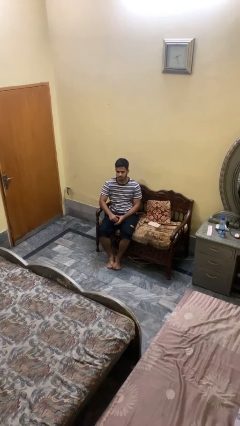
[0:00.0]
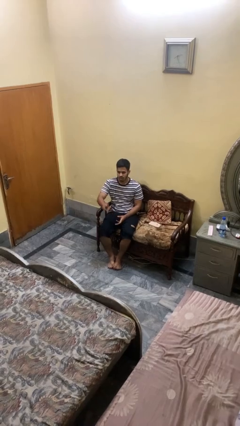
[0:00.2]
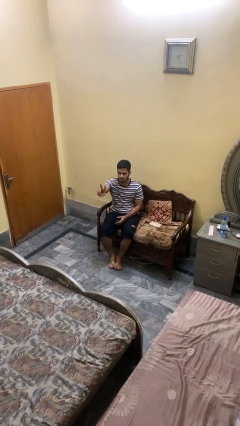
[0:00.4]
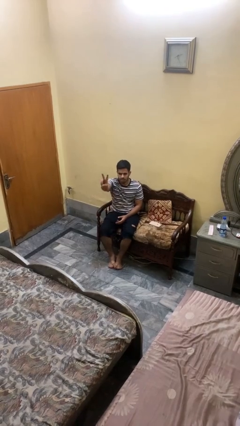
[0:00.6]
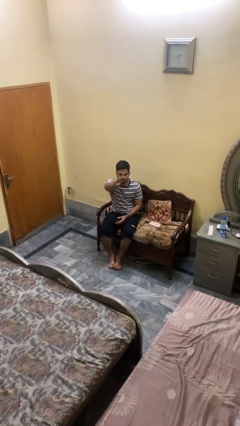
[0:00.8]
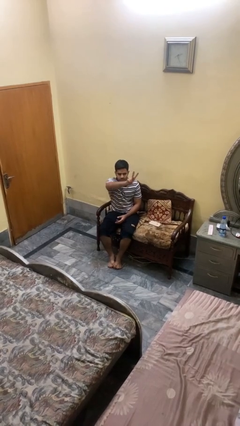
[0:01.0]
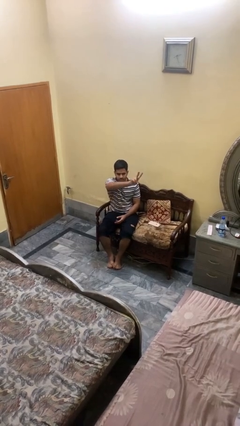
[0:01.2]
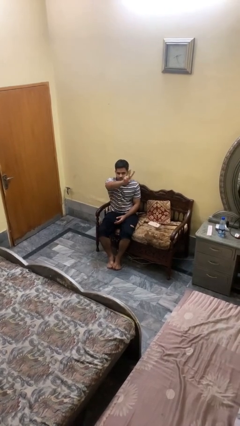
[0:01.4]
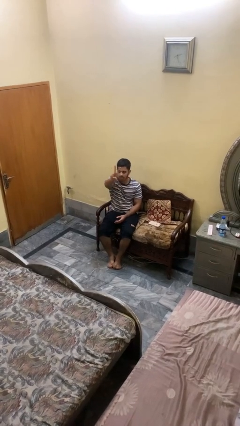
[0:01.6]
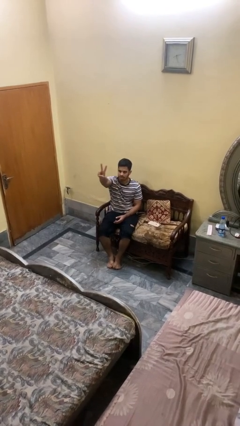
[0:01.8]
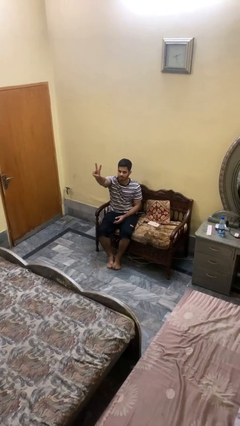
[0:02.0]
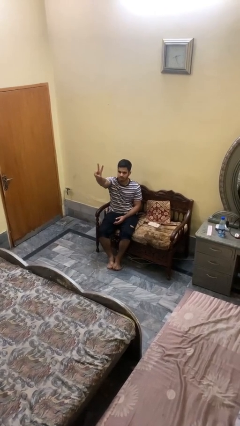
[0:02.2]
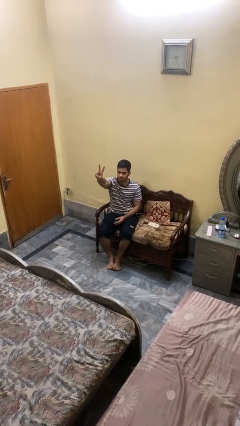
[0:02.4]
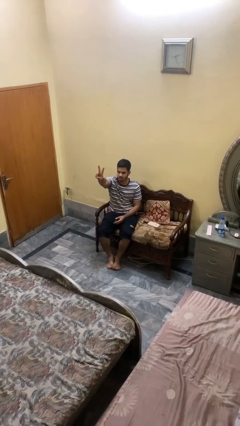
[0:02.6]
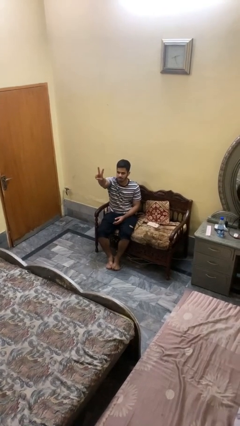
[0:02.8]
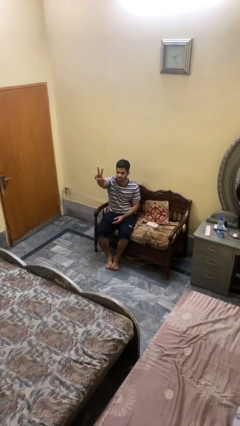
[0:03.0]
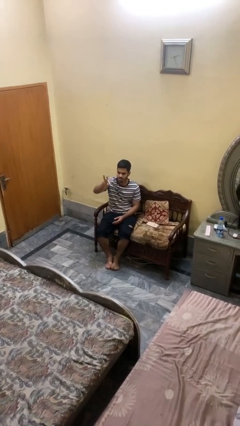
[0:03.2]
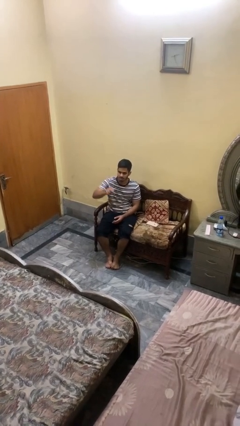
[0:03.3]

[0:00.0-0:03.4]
person gestures peace

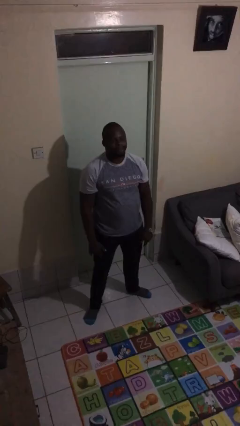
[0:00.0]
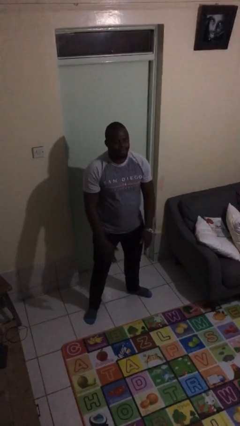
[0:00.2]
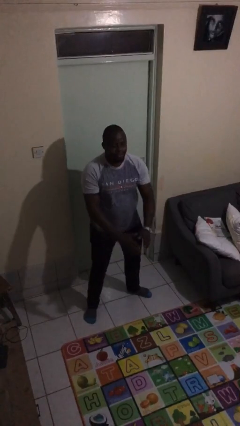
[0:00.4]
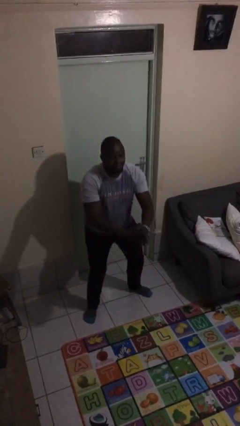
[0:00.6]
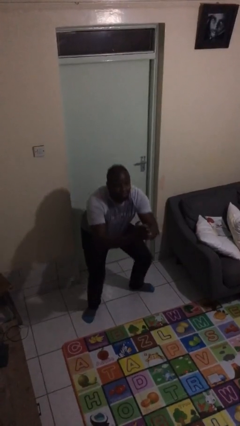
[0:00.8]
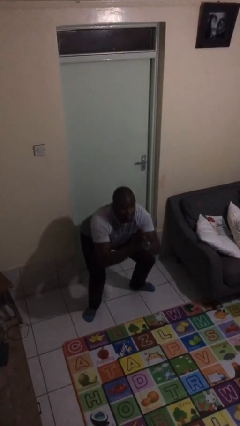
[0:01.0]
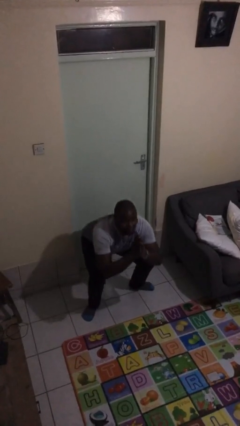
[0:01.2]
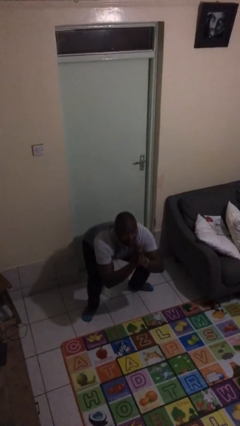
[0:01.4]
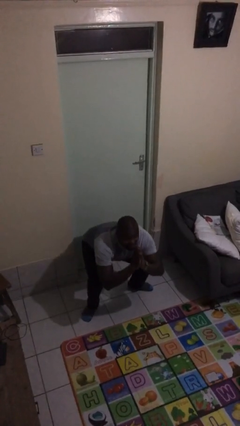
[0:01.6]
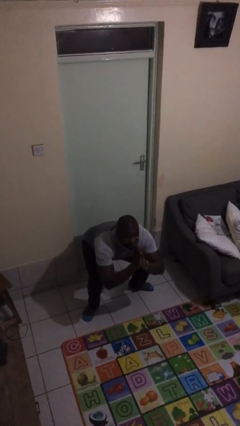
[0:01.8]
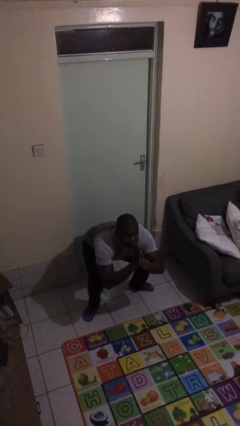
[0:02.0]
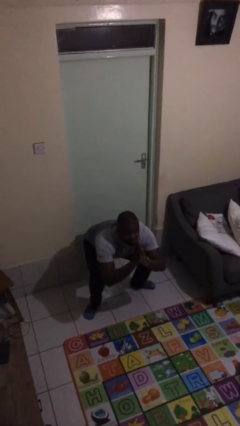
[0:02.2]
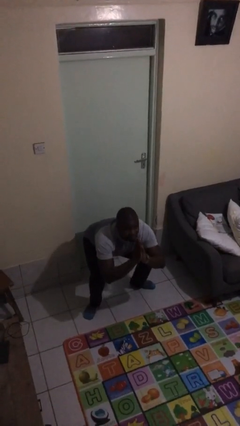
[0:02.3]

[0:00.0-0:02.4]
person squats

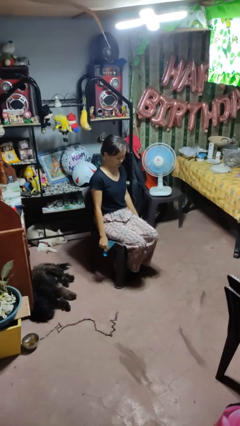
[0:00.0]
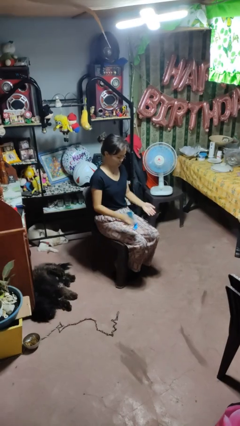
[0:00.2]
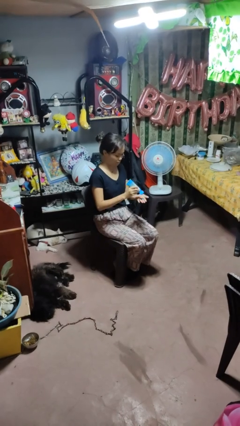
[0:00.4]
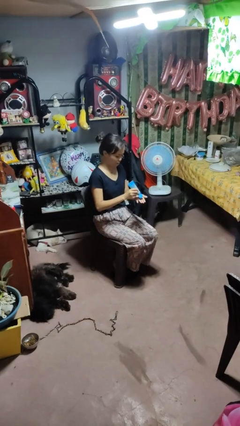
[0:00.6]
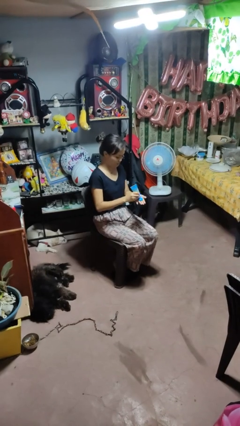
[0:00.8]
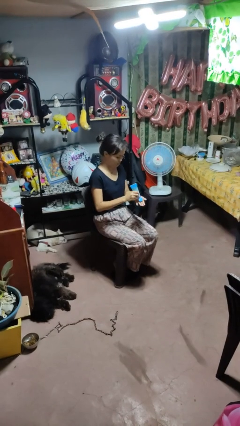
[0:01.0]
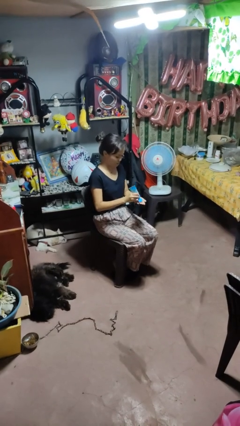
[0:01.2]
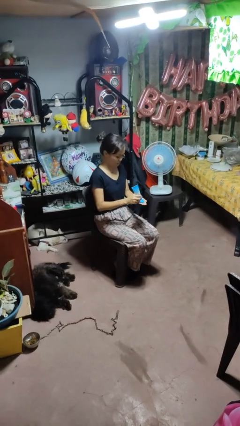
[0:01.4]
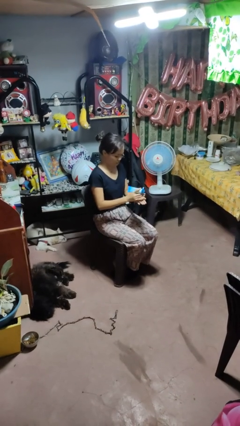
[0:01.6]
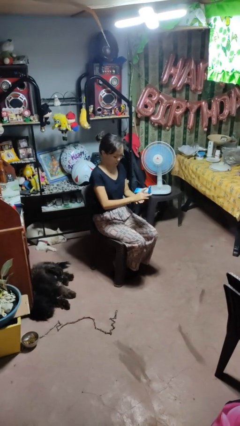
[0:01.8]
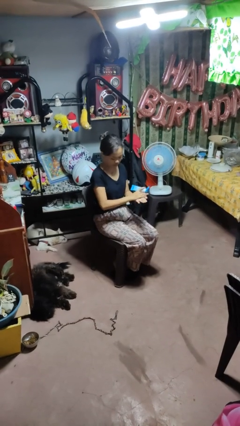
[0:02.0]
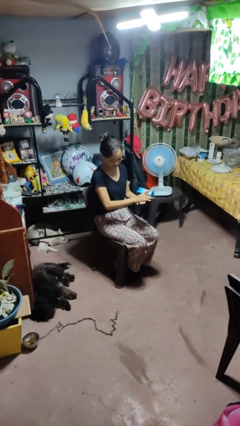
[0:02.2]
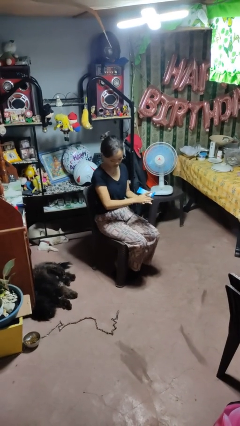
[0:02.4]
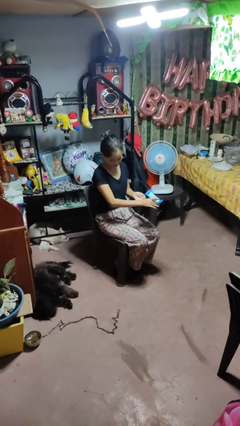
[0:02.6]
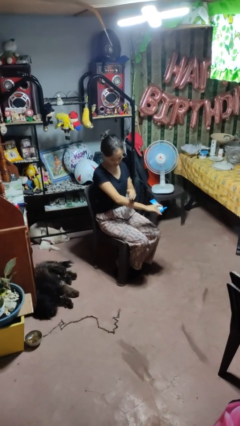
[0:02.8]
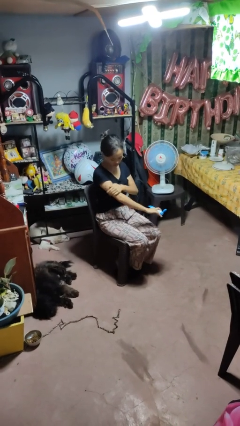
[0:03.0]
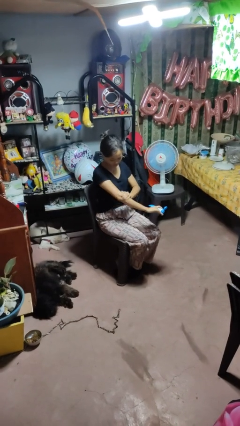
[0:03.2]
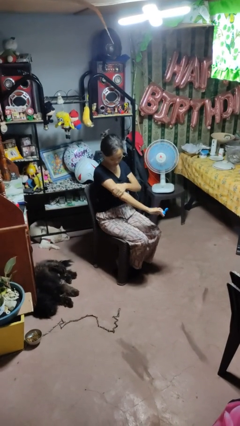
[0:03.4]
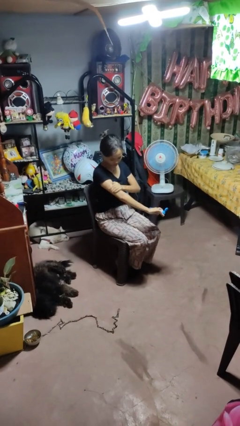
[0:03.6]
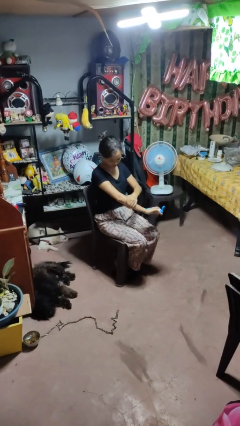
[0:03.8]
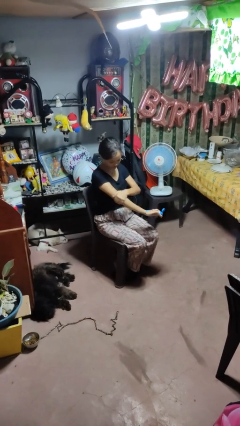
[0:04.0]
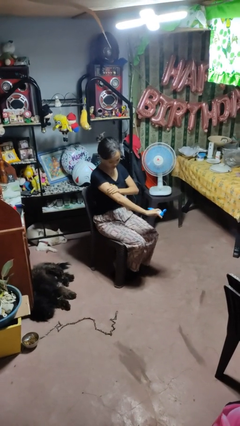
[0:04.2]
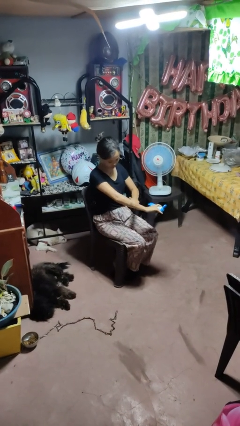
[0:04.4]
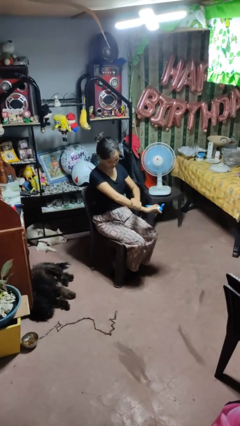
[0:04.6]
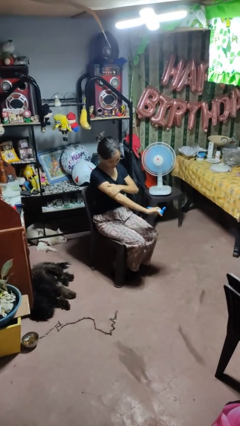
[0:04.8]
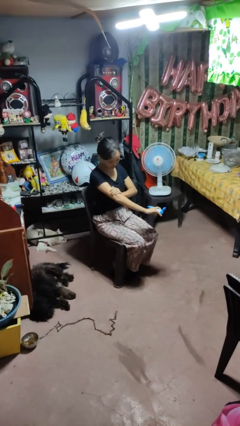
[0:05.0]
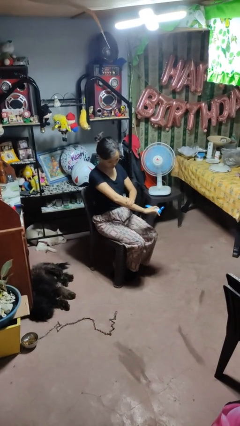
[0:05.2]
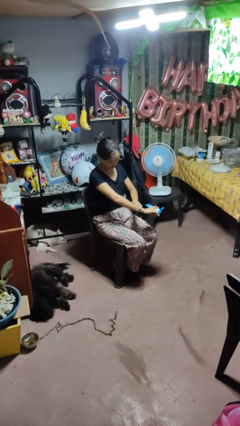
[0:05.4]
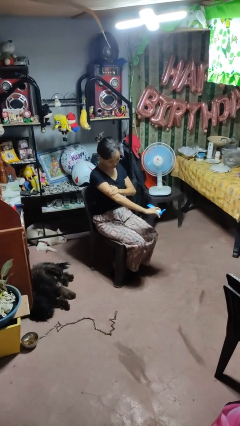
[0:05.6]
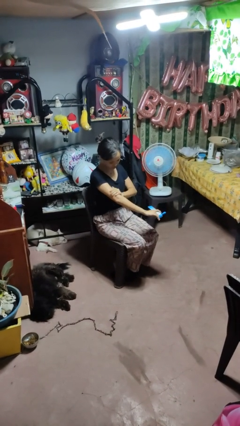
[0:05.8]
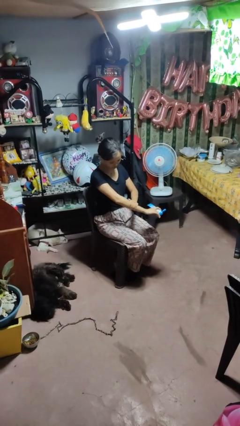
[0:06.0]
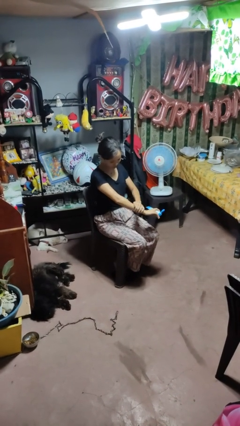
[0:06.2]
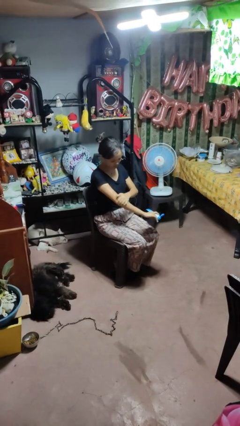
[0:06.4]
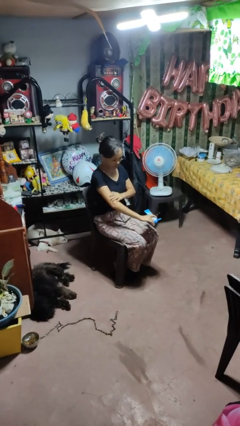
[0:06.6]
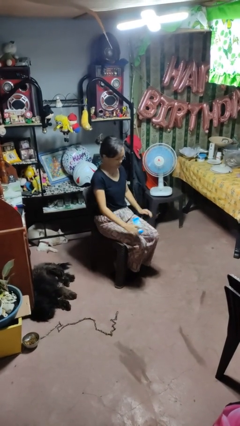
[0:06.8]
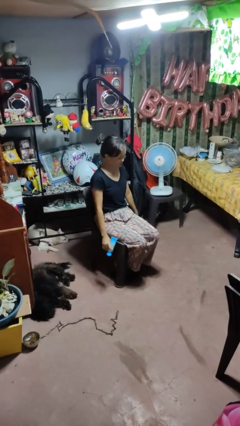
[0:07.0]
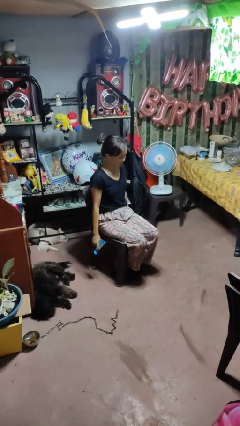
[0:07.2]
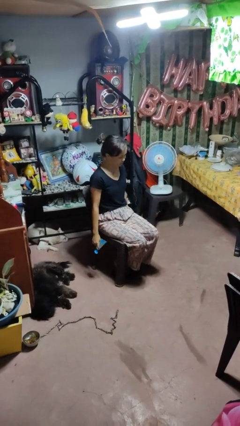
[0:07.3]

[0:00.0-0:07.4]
person applies sunscreen

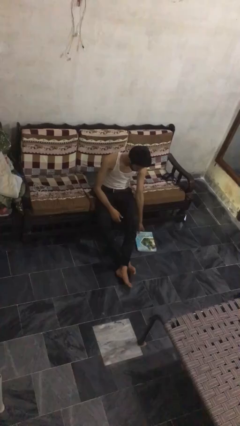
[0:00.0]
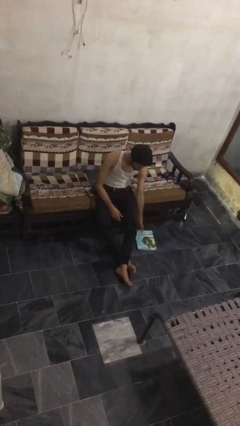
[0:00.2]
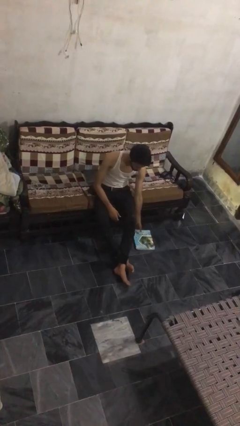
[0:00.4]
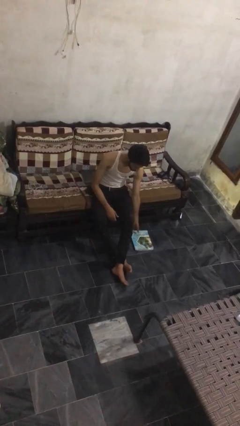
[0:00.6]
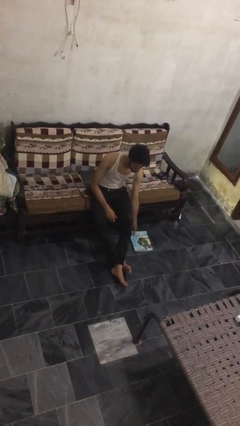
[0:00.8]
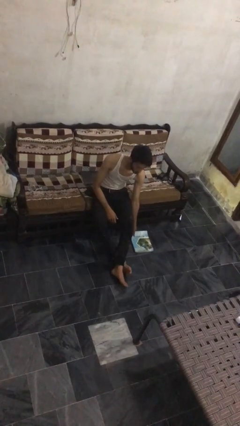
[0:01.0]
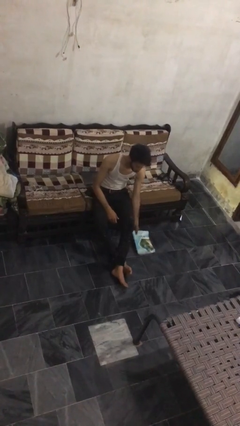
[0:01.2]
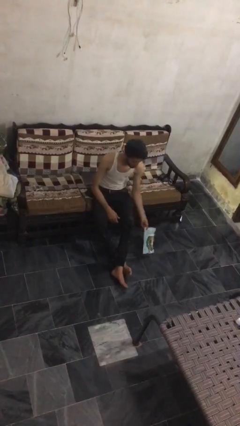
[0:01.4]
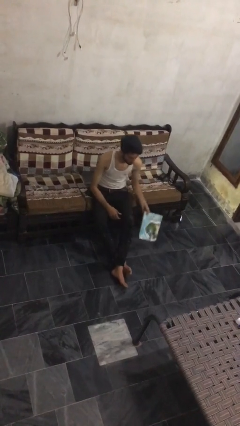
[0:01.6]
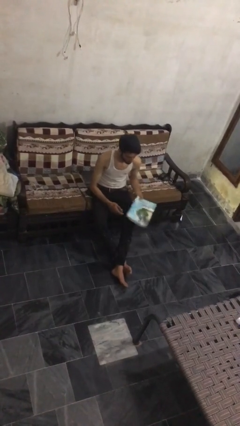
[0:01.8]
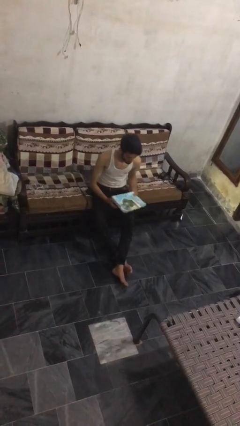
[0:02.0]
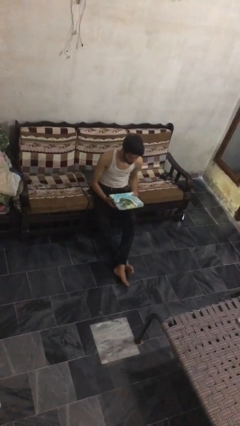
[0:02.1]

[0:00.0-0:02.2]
person picks up object from floor

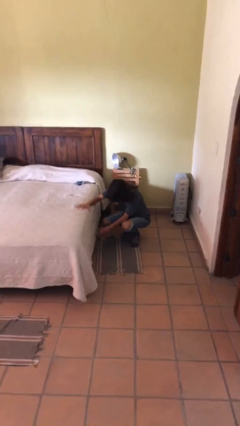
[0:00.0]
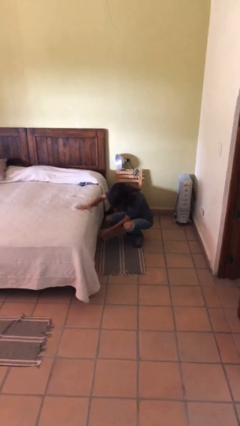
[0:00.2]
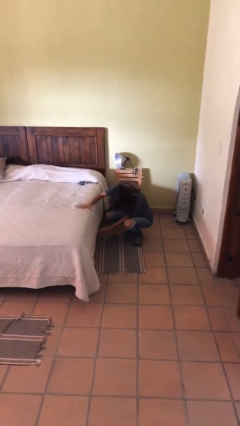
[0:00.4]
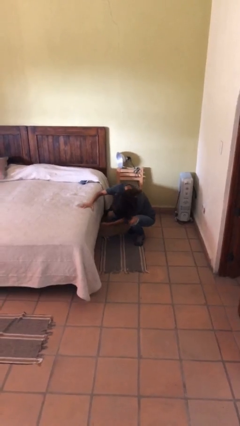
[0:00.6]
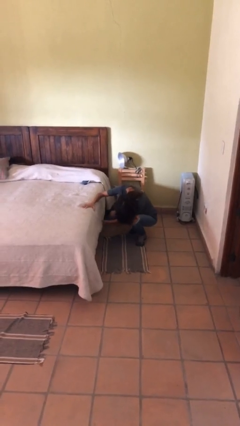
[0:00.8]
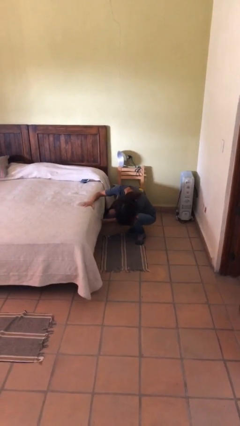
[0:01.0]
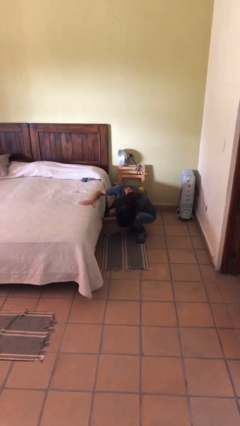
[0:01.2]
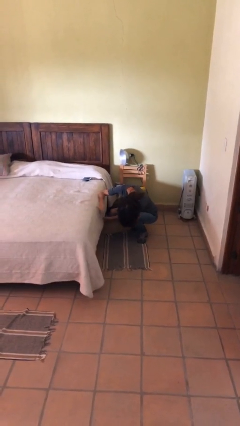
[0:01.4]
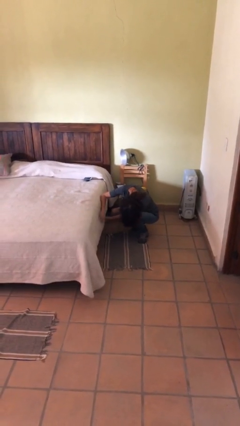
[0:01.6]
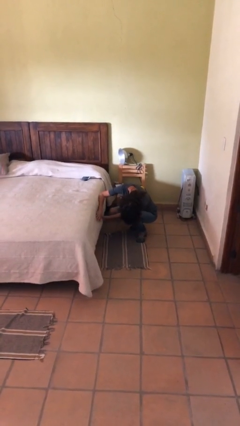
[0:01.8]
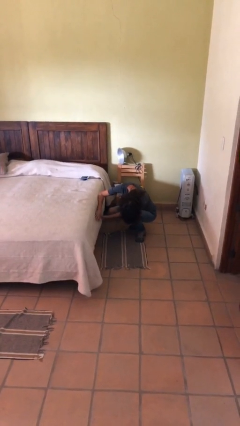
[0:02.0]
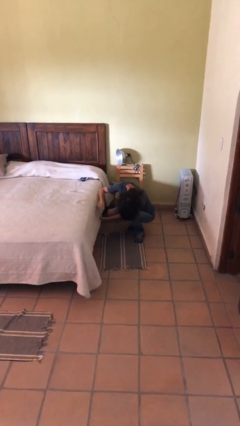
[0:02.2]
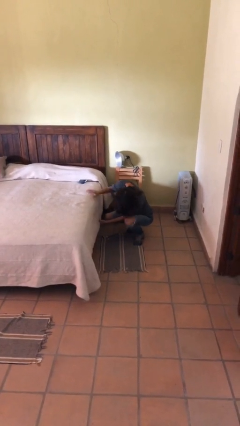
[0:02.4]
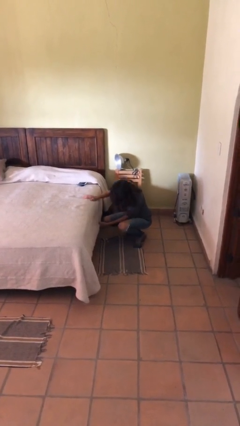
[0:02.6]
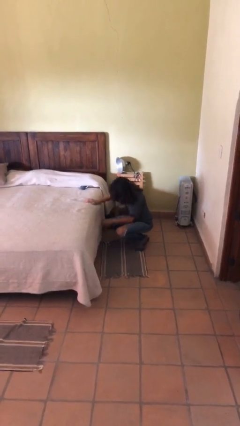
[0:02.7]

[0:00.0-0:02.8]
person searches under bed
